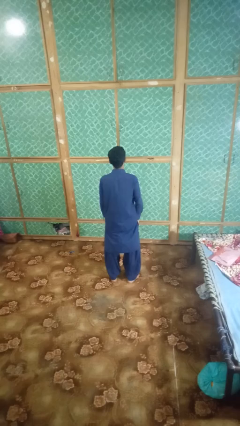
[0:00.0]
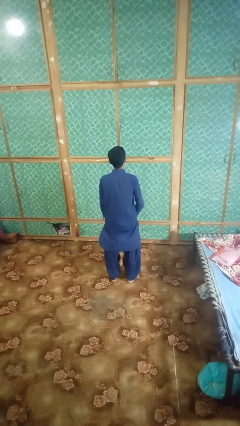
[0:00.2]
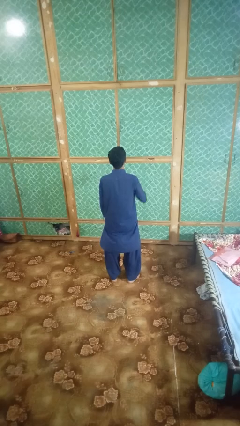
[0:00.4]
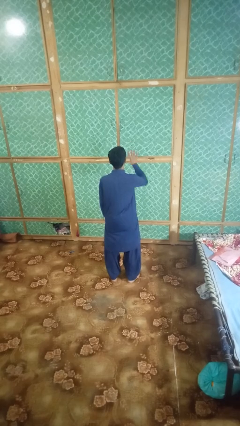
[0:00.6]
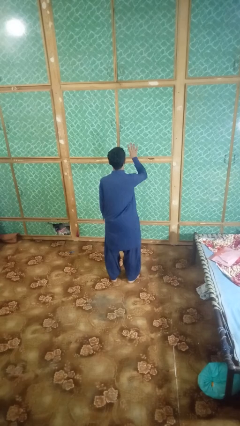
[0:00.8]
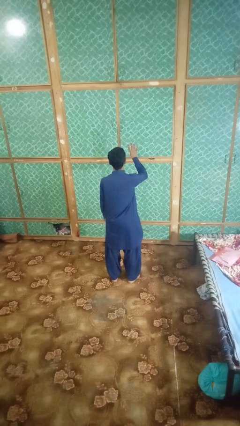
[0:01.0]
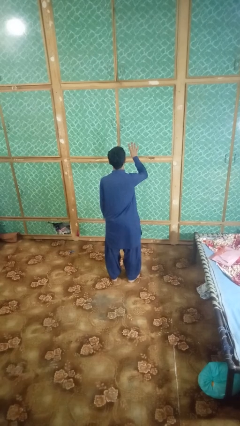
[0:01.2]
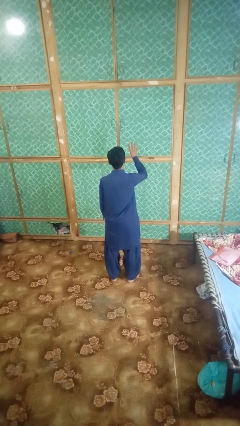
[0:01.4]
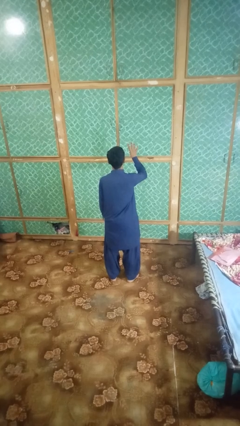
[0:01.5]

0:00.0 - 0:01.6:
person gestures number four

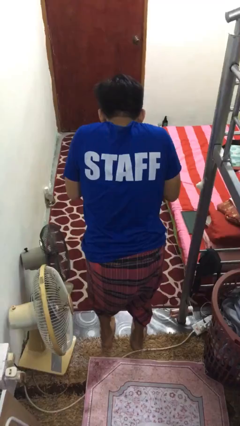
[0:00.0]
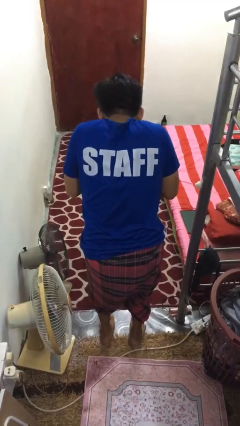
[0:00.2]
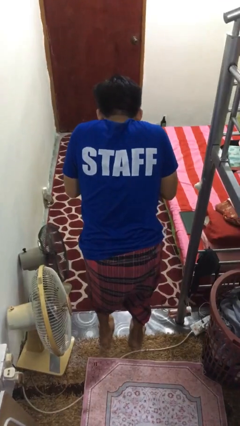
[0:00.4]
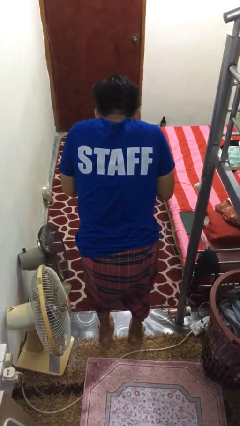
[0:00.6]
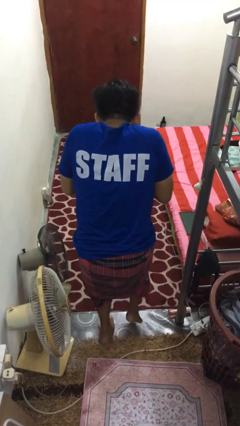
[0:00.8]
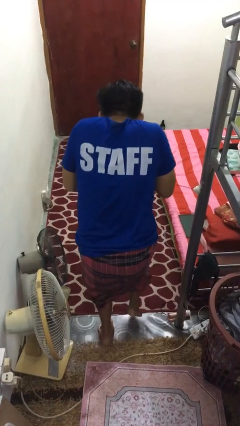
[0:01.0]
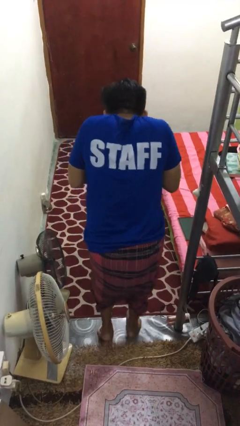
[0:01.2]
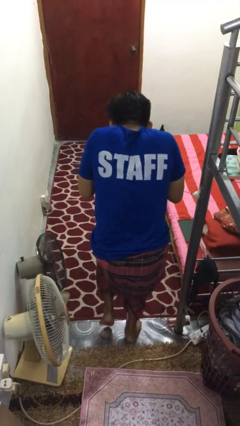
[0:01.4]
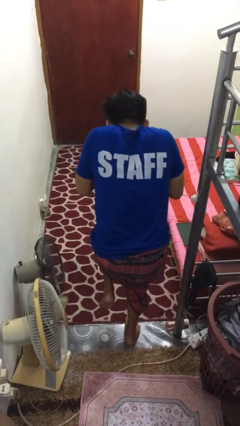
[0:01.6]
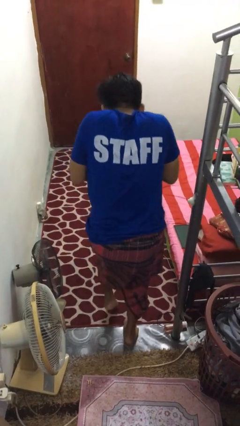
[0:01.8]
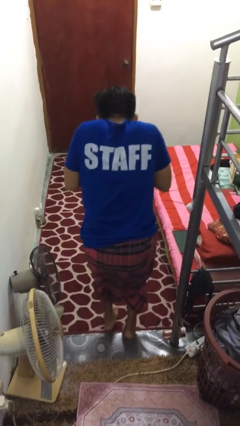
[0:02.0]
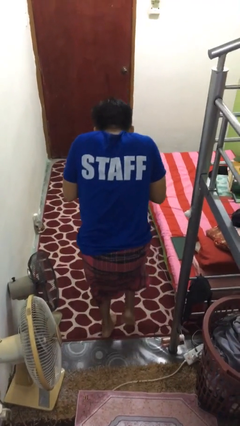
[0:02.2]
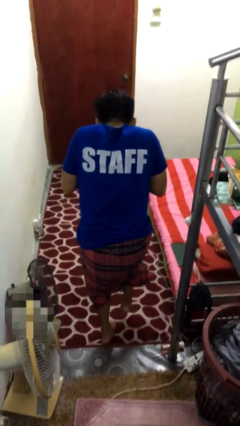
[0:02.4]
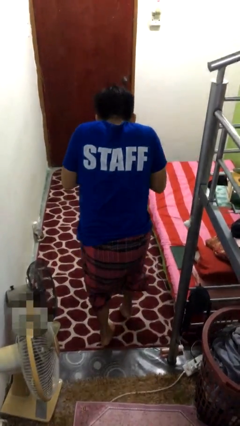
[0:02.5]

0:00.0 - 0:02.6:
person walks tiptoe

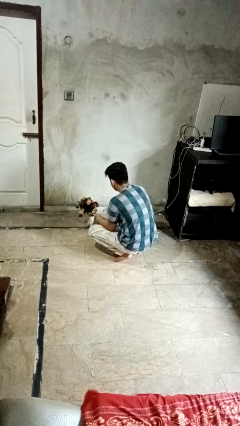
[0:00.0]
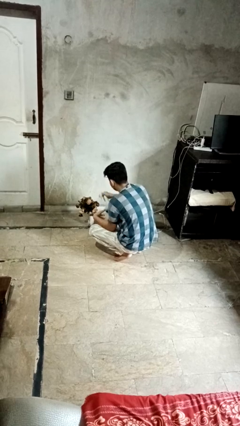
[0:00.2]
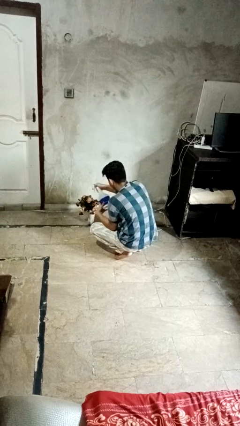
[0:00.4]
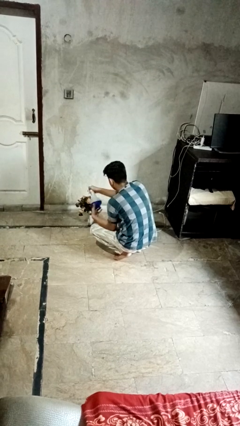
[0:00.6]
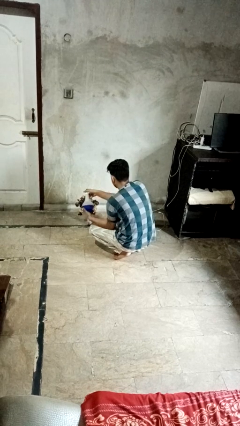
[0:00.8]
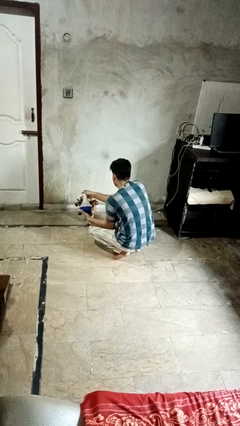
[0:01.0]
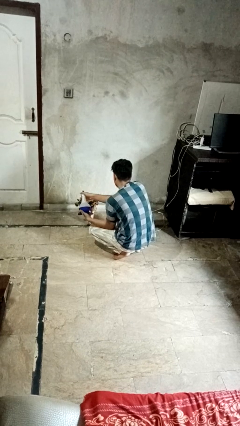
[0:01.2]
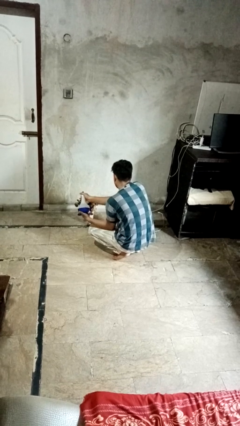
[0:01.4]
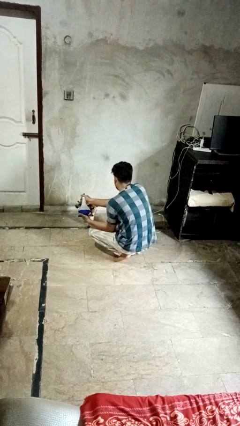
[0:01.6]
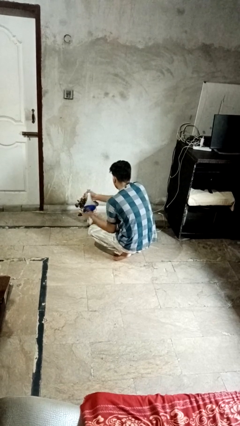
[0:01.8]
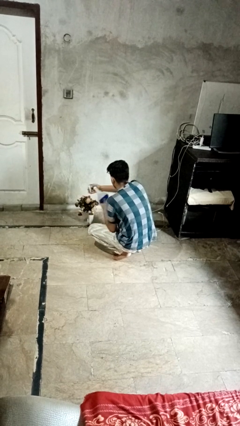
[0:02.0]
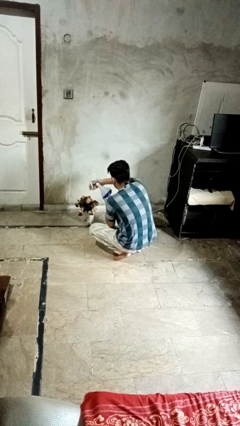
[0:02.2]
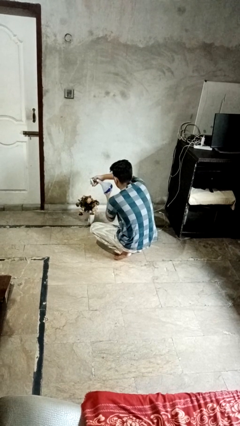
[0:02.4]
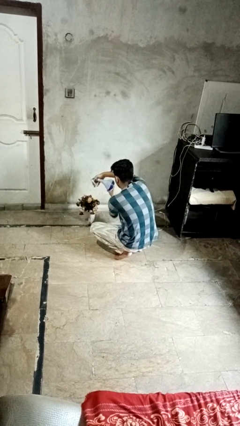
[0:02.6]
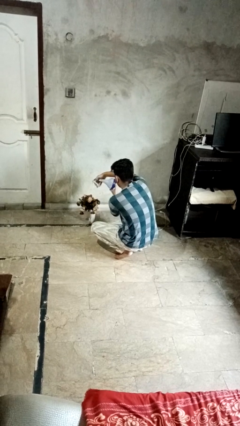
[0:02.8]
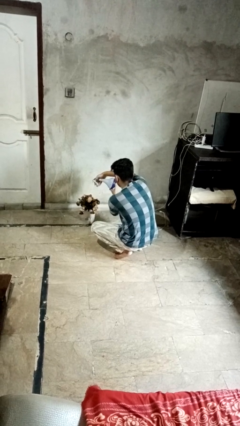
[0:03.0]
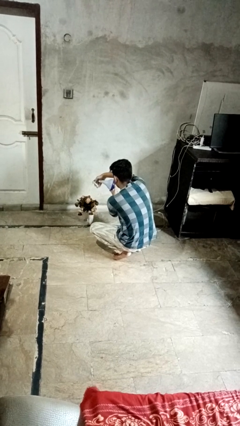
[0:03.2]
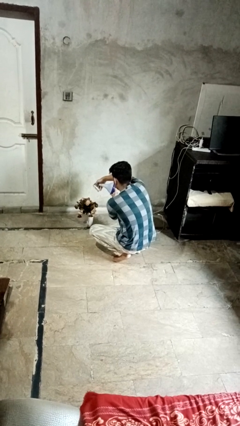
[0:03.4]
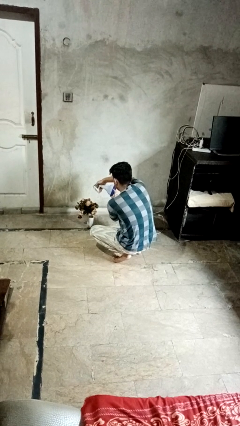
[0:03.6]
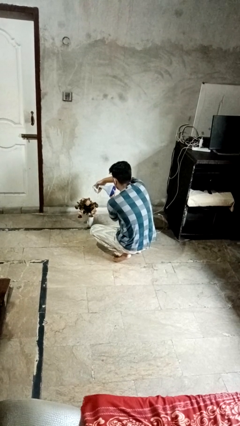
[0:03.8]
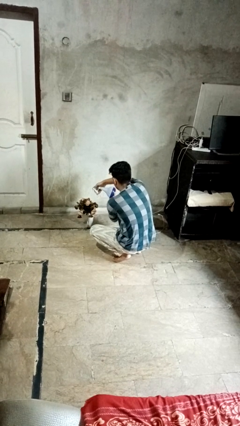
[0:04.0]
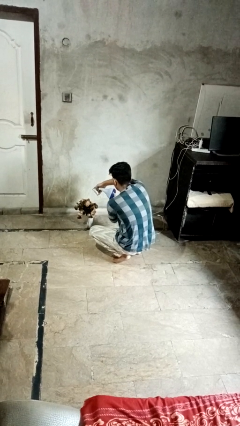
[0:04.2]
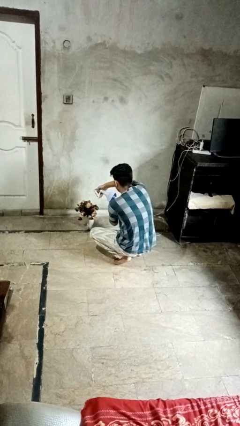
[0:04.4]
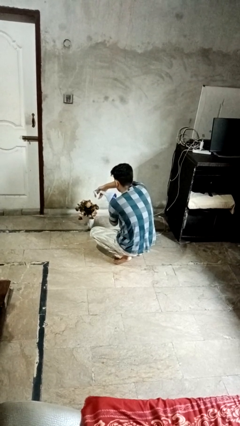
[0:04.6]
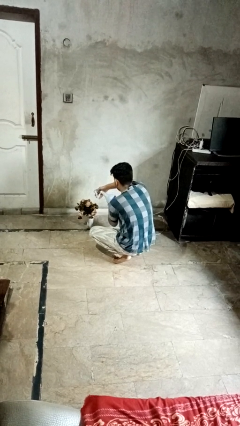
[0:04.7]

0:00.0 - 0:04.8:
person waters houseplant

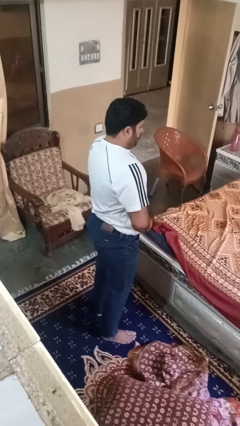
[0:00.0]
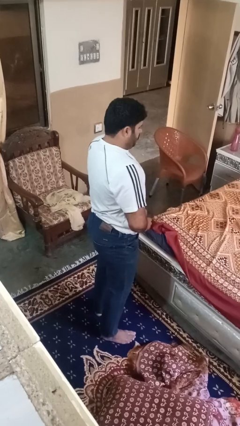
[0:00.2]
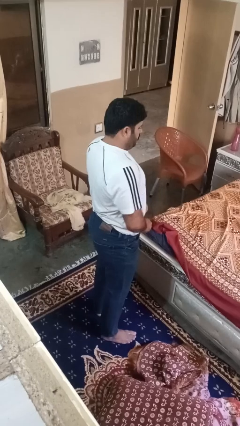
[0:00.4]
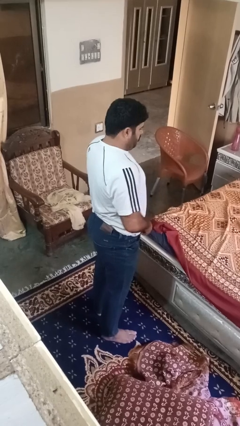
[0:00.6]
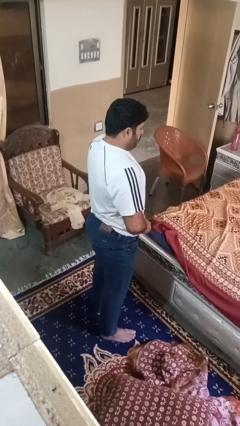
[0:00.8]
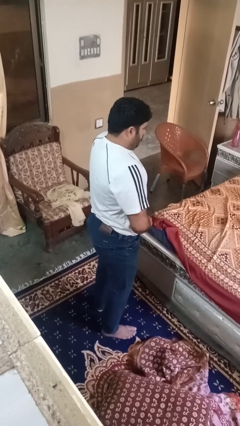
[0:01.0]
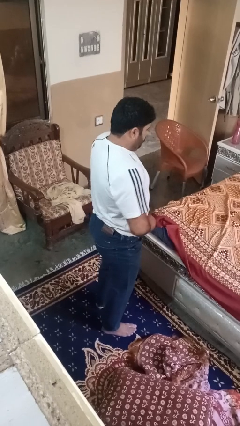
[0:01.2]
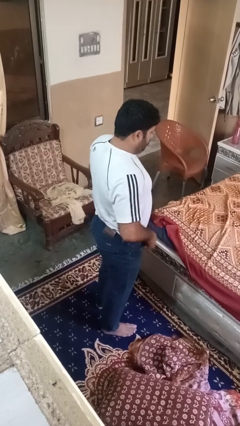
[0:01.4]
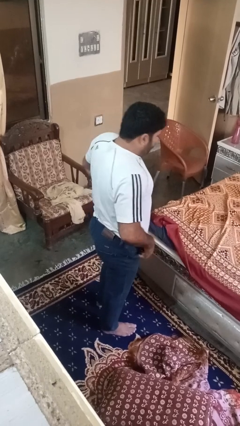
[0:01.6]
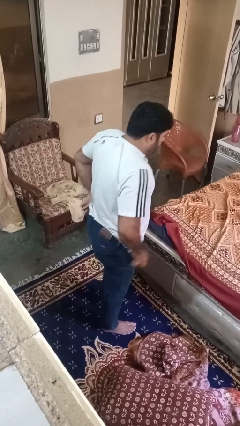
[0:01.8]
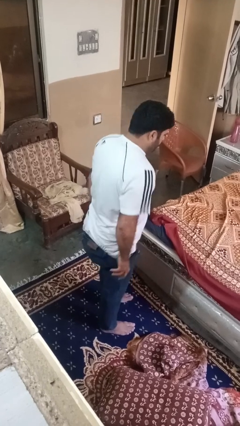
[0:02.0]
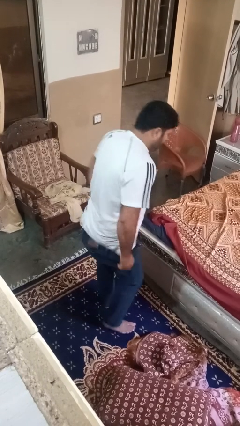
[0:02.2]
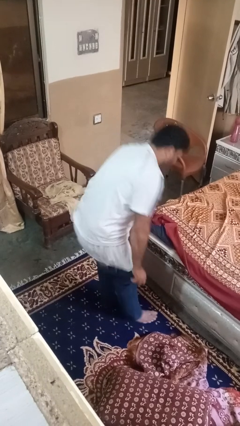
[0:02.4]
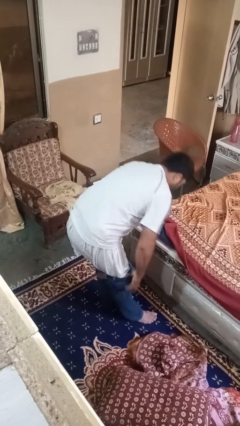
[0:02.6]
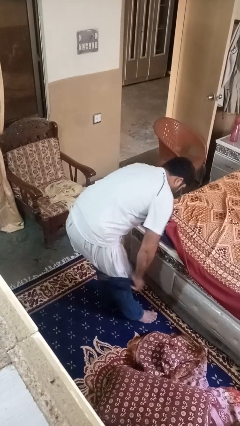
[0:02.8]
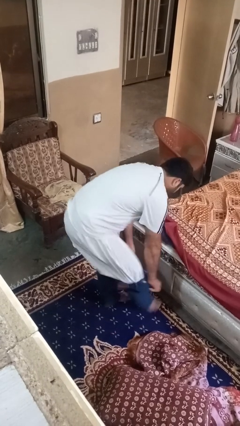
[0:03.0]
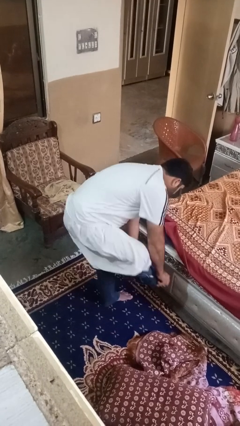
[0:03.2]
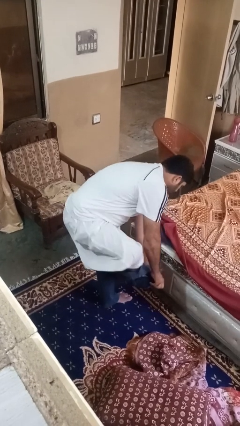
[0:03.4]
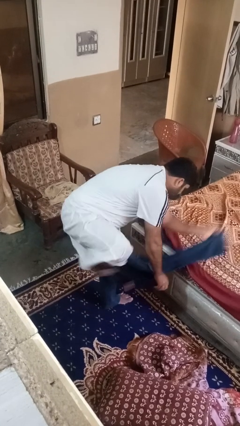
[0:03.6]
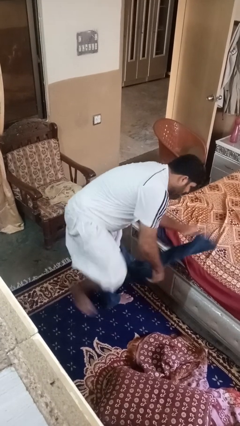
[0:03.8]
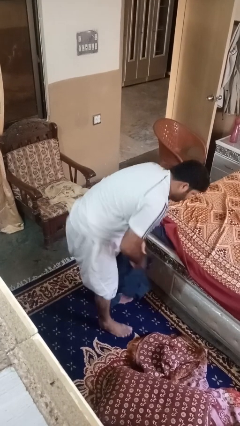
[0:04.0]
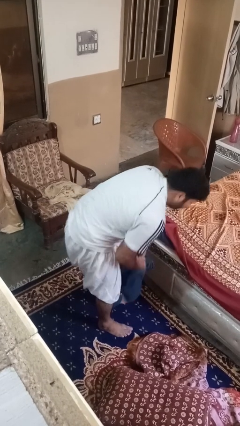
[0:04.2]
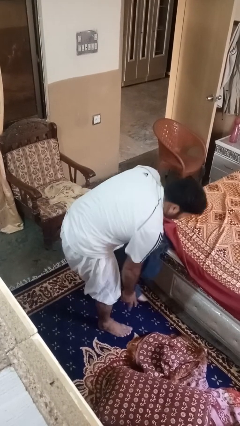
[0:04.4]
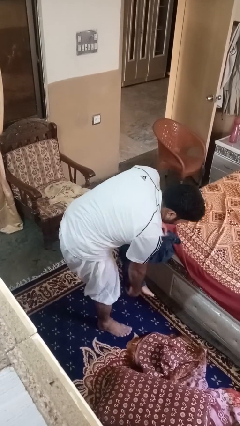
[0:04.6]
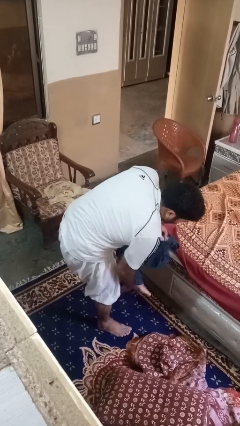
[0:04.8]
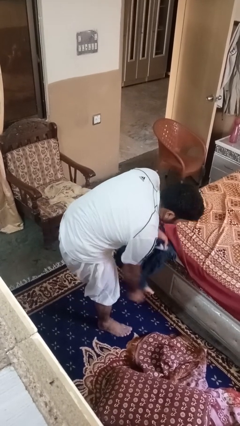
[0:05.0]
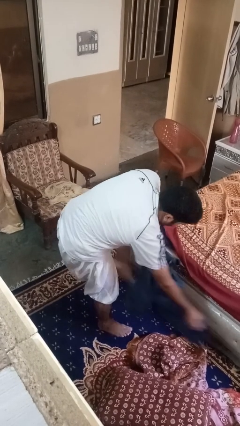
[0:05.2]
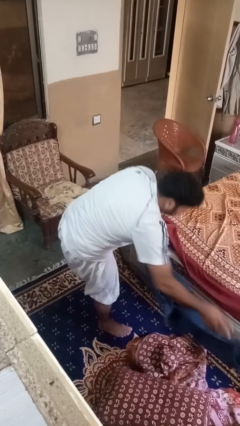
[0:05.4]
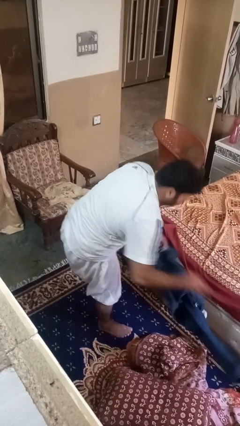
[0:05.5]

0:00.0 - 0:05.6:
person takes off pants

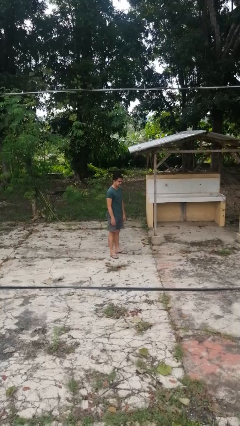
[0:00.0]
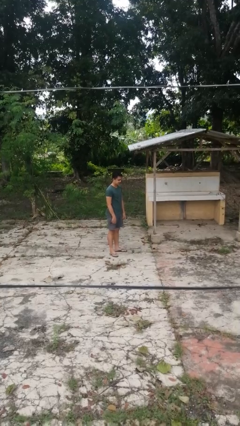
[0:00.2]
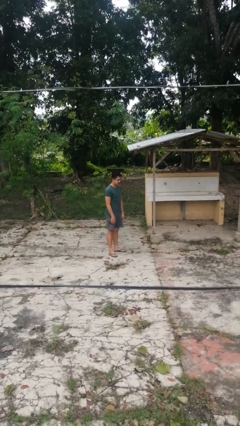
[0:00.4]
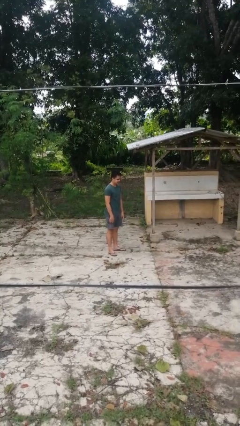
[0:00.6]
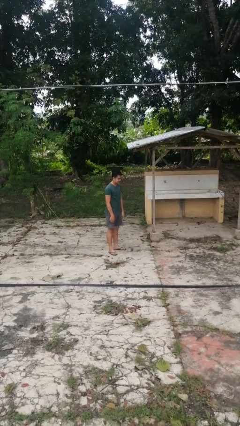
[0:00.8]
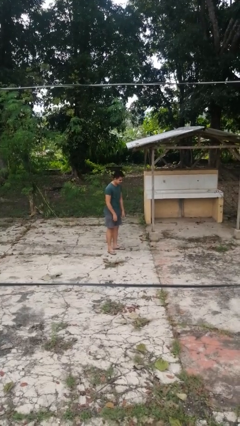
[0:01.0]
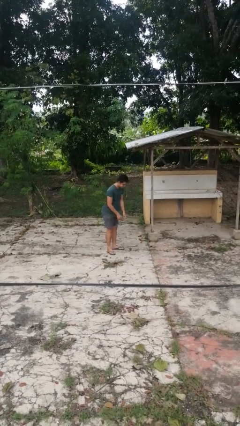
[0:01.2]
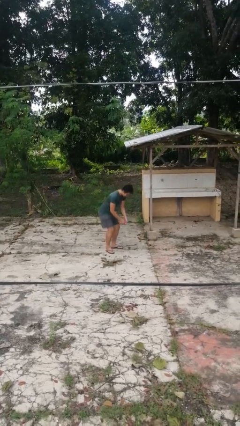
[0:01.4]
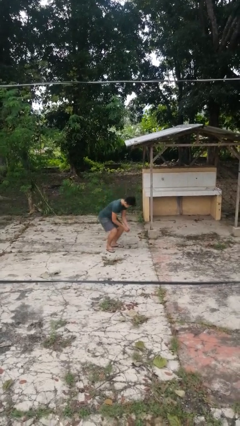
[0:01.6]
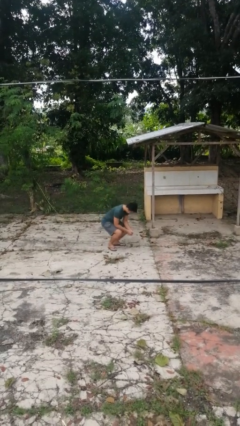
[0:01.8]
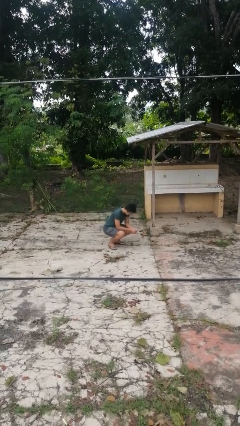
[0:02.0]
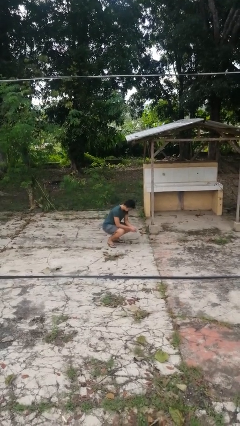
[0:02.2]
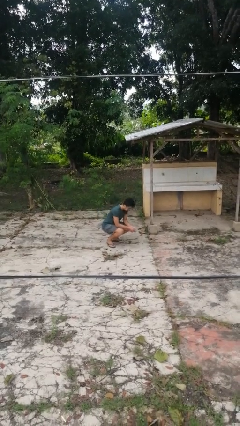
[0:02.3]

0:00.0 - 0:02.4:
person squats
